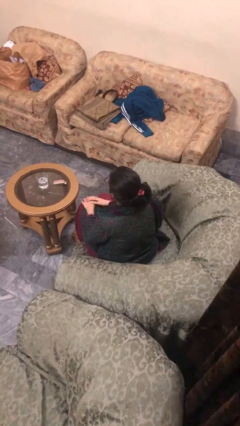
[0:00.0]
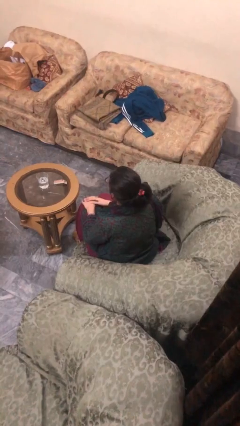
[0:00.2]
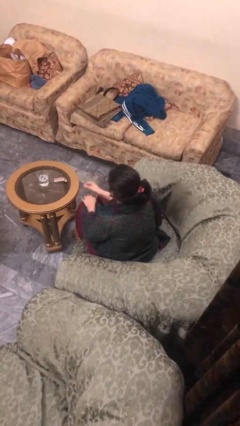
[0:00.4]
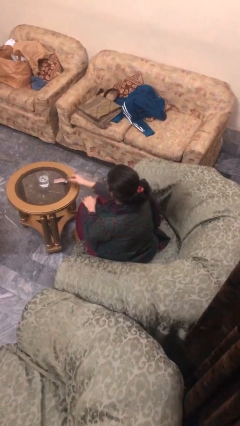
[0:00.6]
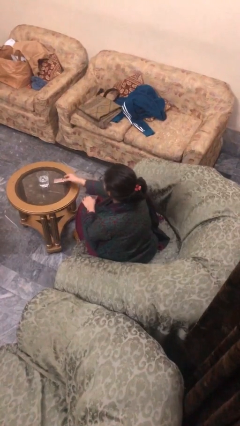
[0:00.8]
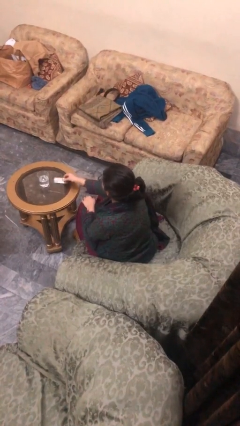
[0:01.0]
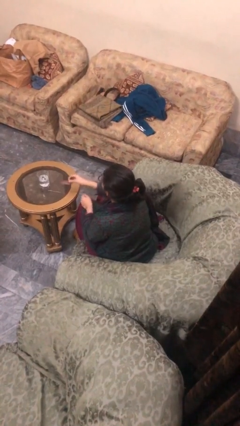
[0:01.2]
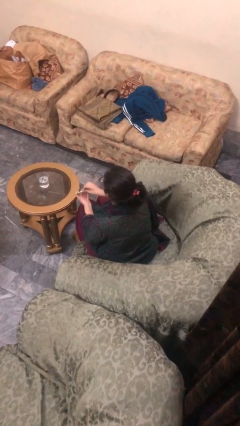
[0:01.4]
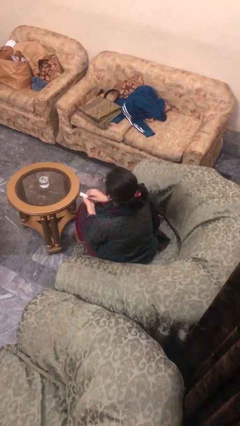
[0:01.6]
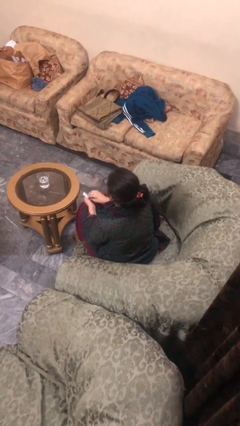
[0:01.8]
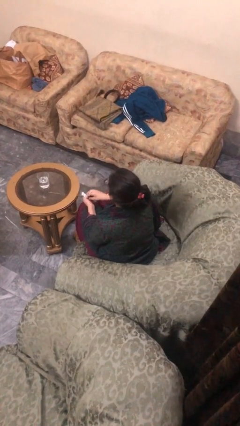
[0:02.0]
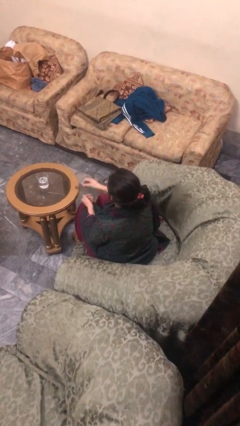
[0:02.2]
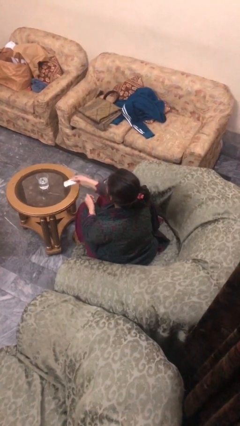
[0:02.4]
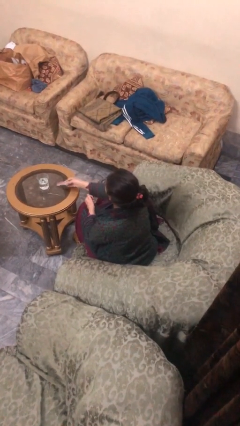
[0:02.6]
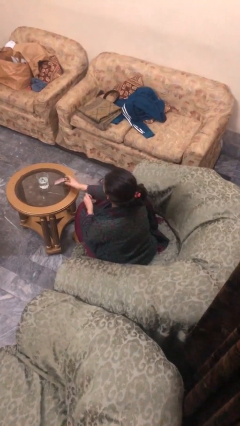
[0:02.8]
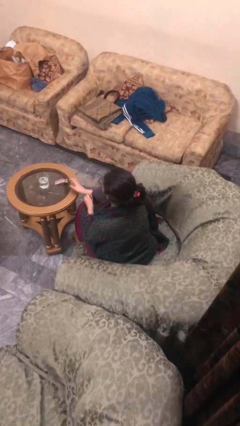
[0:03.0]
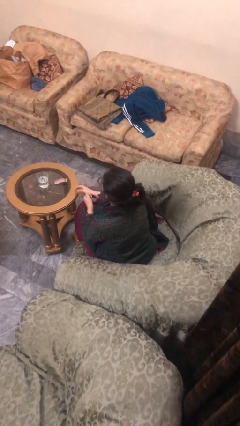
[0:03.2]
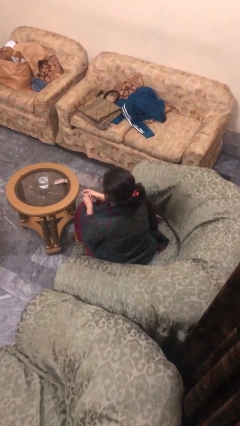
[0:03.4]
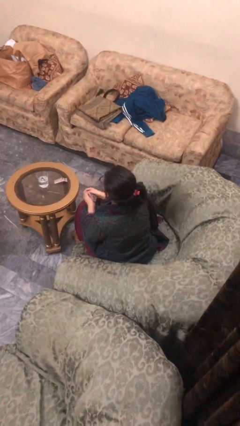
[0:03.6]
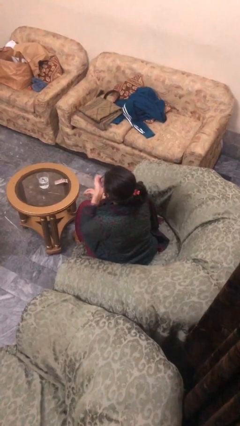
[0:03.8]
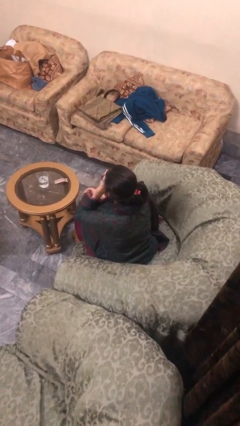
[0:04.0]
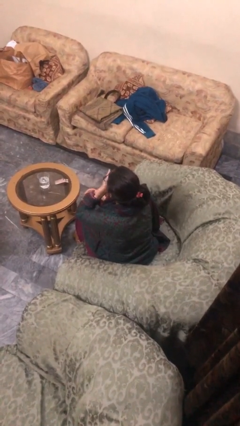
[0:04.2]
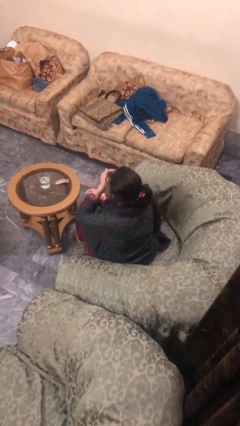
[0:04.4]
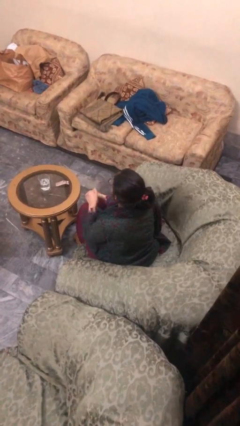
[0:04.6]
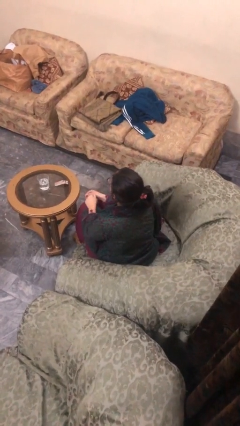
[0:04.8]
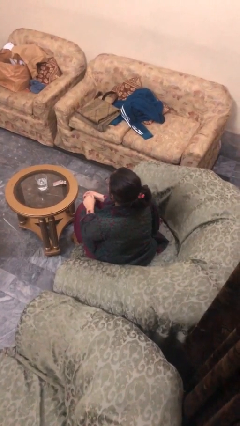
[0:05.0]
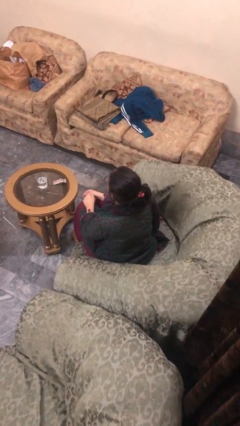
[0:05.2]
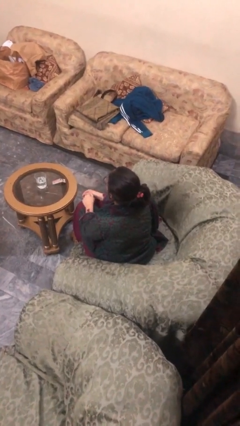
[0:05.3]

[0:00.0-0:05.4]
person takes medicine pills

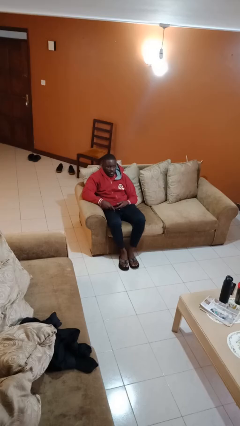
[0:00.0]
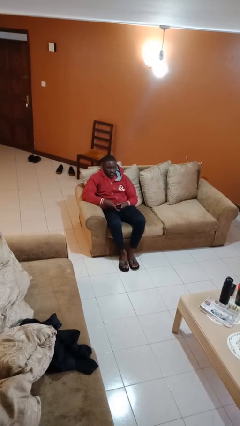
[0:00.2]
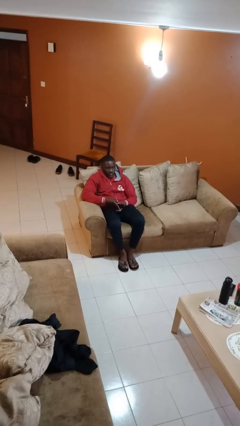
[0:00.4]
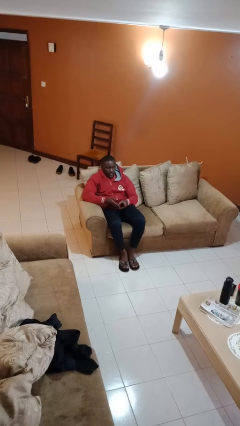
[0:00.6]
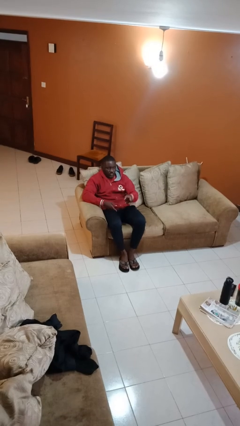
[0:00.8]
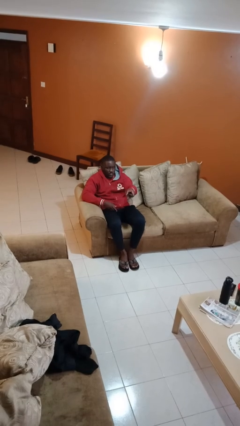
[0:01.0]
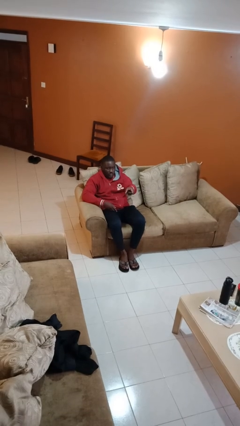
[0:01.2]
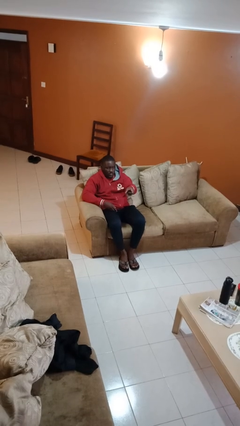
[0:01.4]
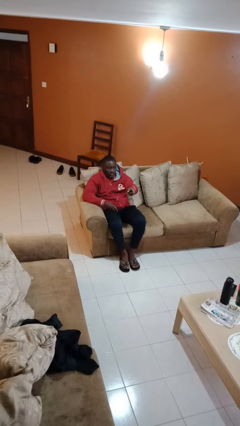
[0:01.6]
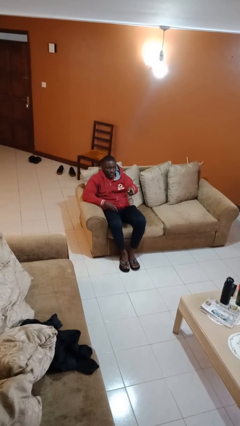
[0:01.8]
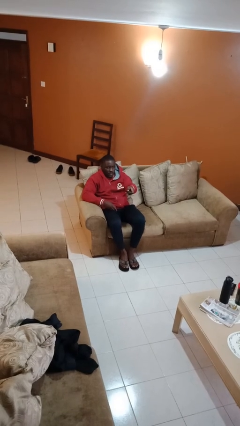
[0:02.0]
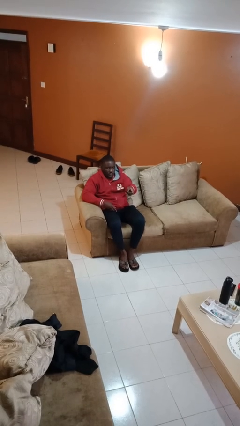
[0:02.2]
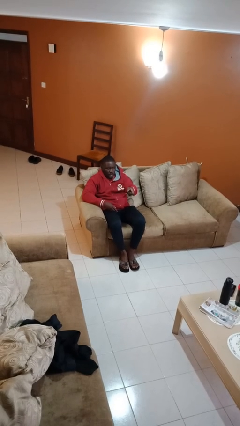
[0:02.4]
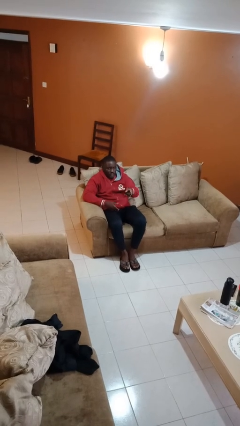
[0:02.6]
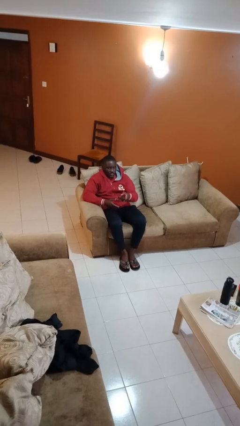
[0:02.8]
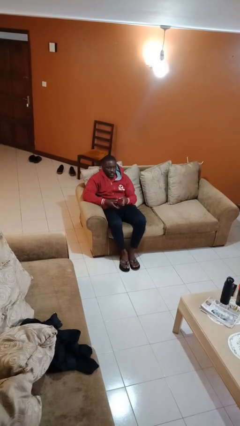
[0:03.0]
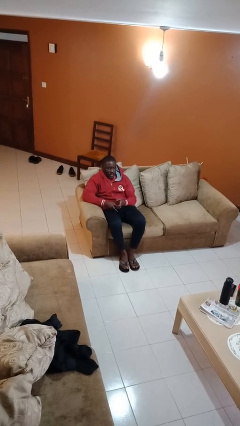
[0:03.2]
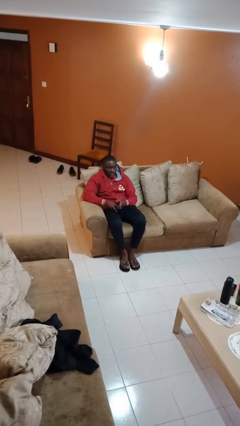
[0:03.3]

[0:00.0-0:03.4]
person uses television remote

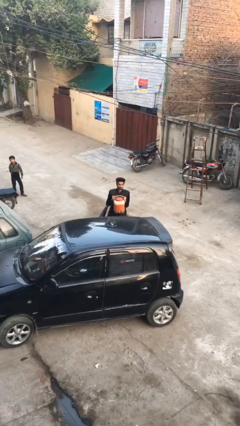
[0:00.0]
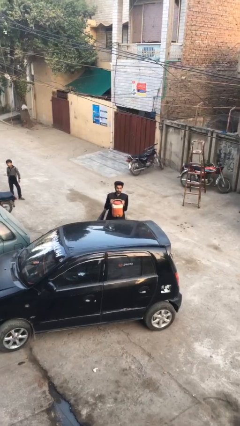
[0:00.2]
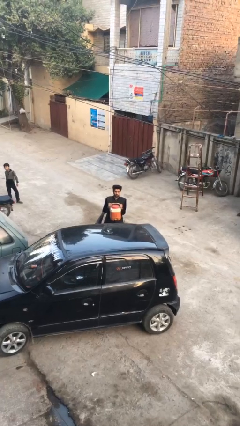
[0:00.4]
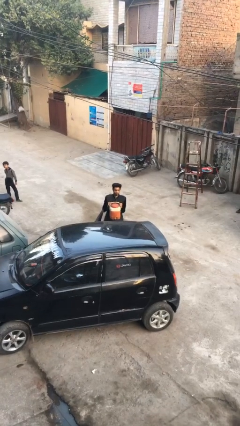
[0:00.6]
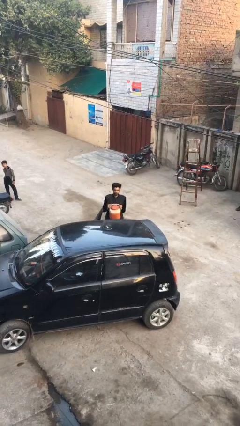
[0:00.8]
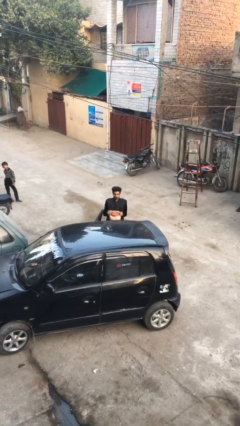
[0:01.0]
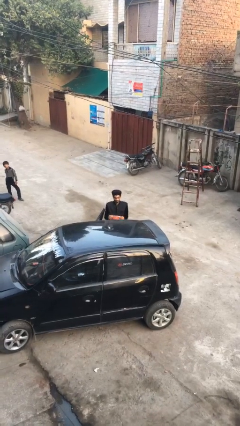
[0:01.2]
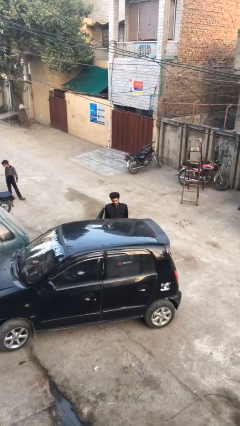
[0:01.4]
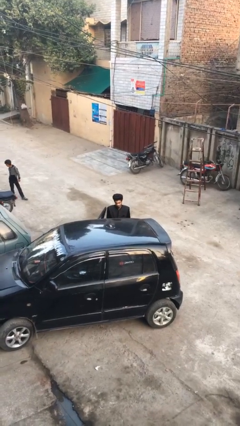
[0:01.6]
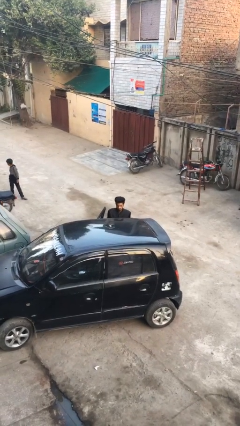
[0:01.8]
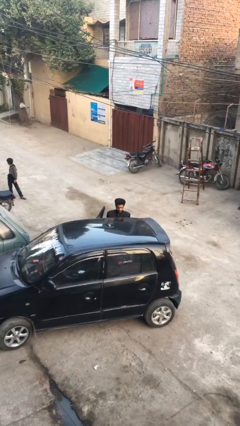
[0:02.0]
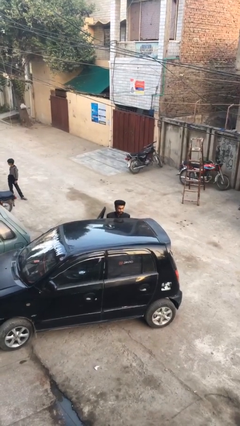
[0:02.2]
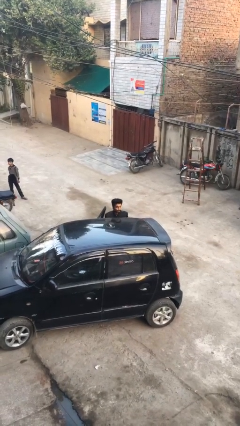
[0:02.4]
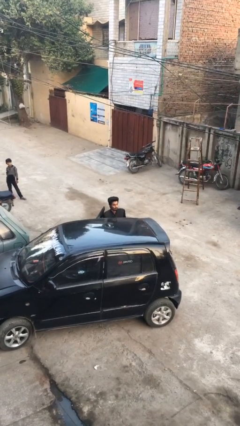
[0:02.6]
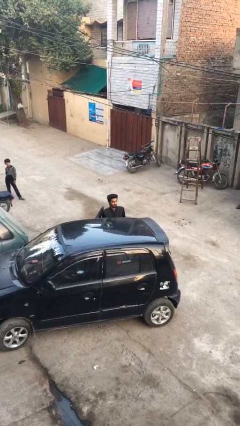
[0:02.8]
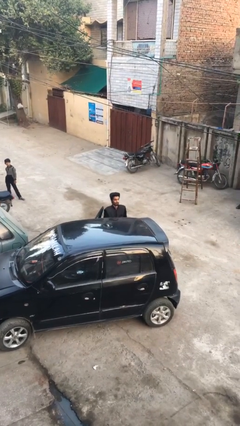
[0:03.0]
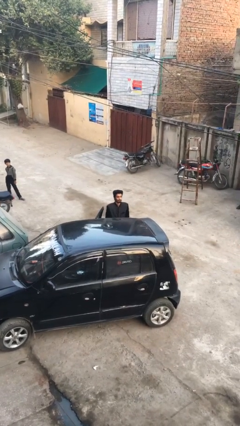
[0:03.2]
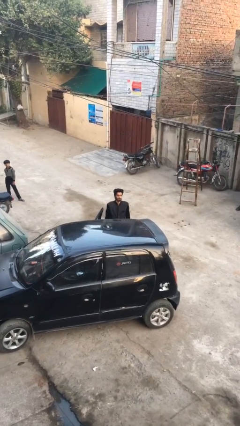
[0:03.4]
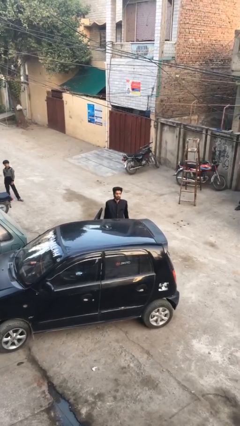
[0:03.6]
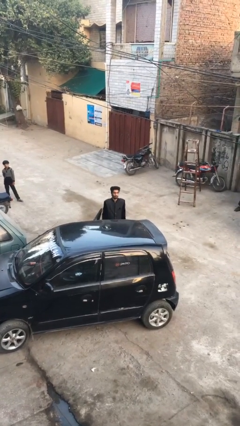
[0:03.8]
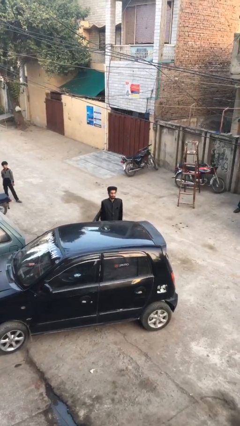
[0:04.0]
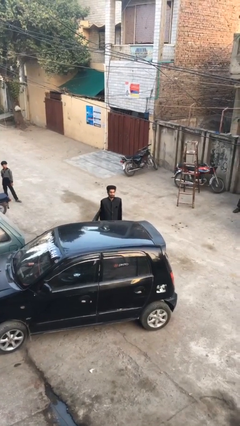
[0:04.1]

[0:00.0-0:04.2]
person loads car

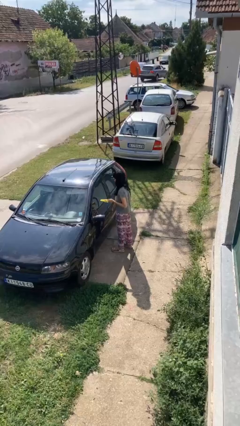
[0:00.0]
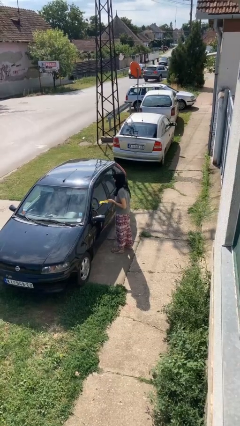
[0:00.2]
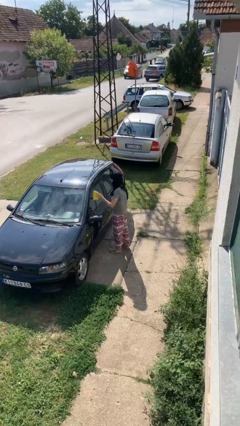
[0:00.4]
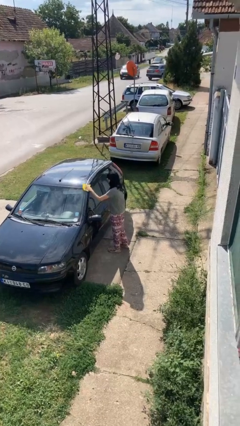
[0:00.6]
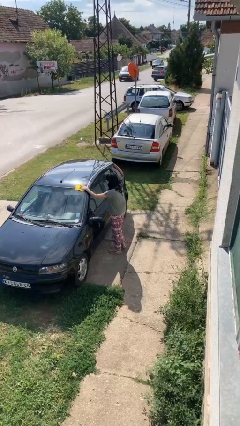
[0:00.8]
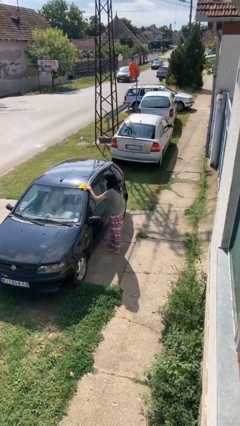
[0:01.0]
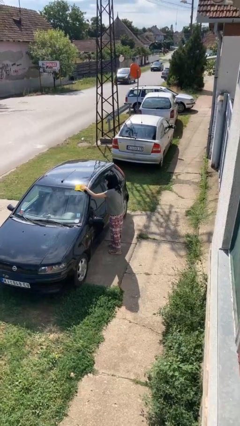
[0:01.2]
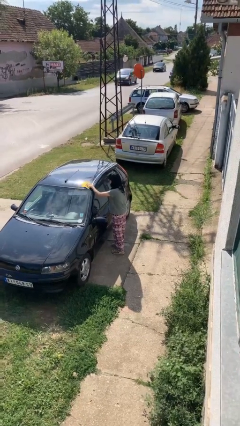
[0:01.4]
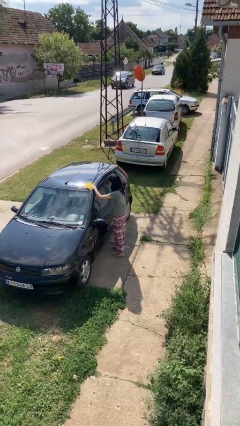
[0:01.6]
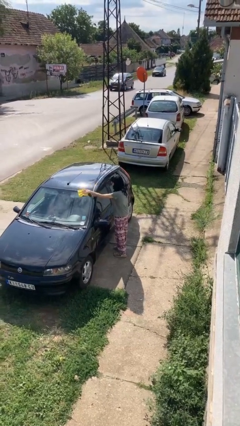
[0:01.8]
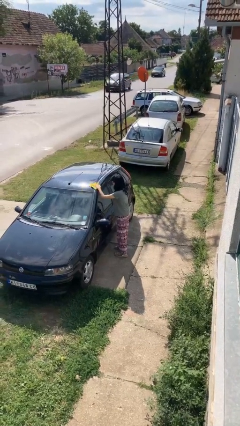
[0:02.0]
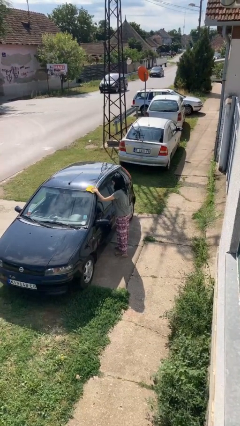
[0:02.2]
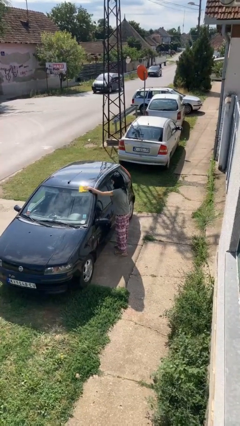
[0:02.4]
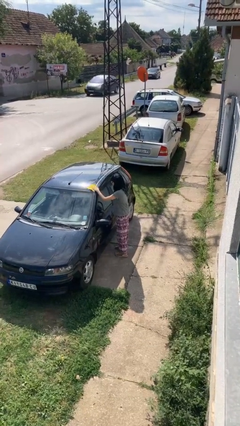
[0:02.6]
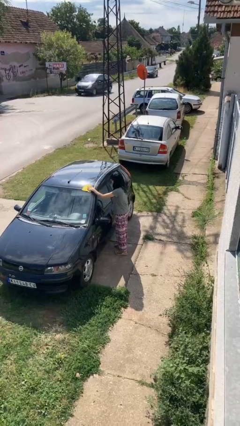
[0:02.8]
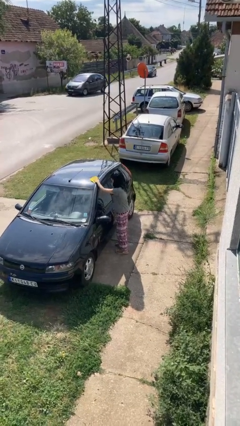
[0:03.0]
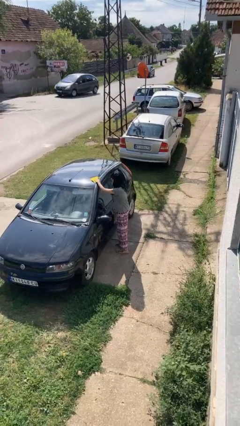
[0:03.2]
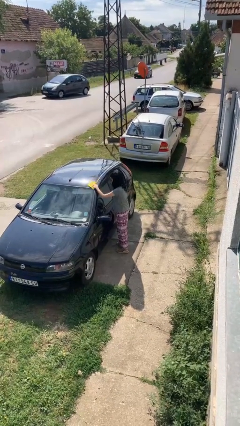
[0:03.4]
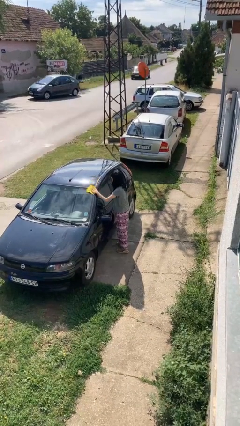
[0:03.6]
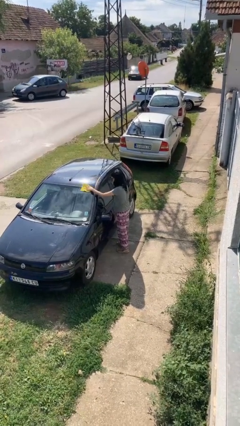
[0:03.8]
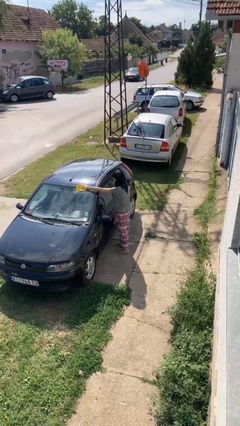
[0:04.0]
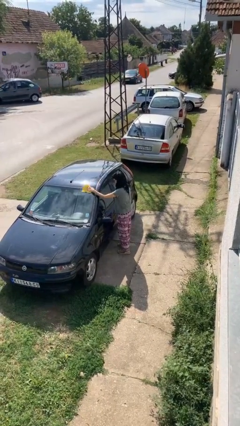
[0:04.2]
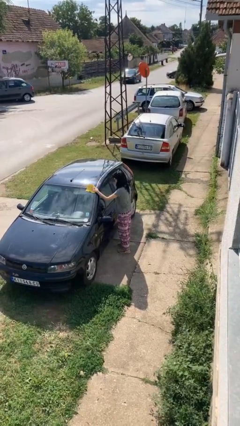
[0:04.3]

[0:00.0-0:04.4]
person polishes car with rag
